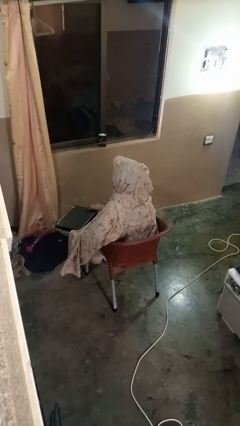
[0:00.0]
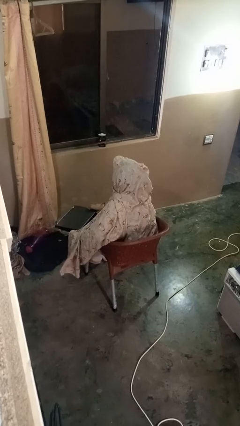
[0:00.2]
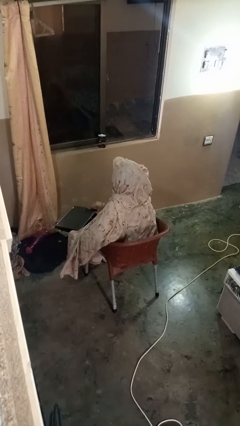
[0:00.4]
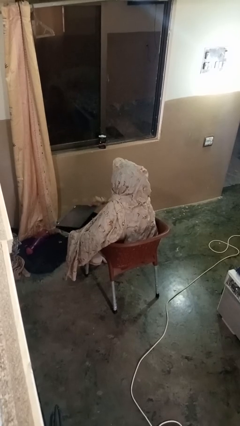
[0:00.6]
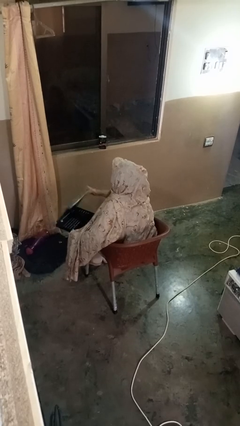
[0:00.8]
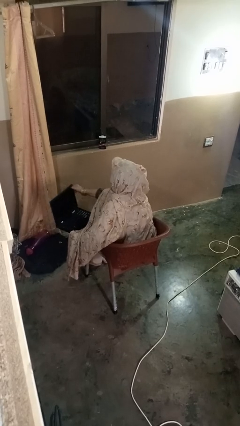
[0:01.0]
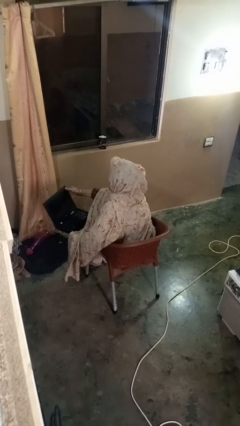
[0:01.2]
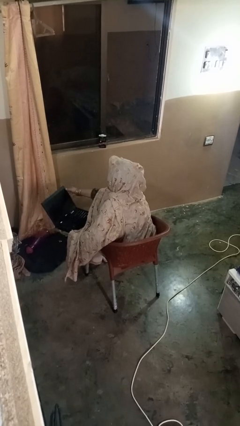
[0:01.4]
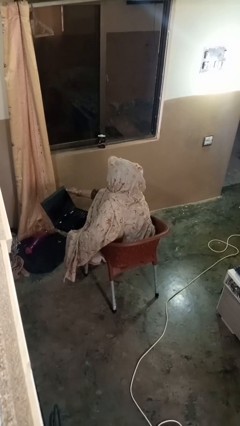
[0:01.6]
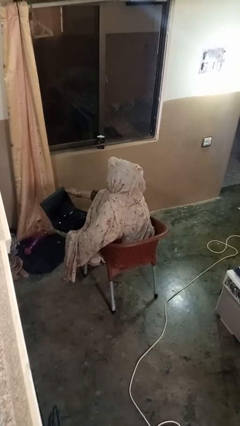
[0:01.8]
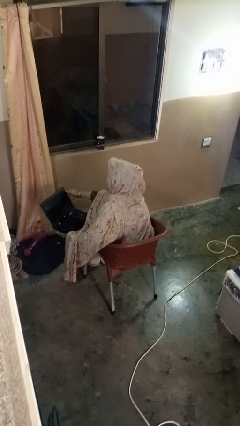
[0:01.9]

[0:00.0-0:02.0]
person opens laptop

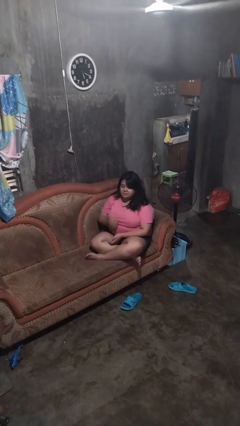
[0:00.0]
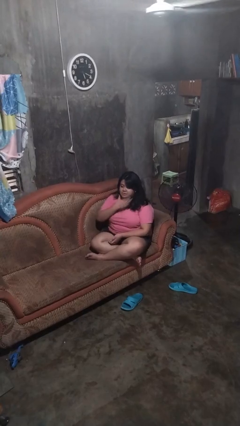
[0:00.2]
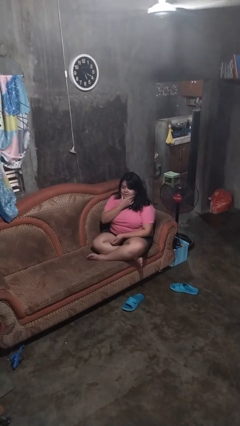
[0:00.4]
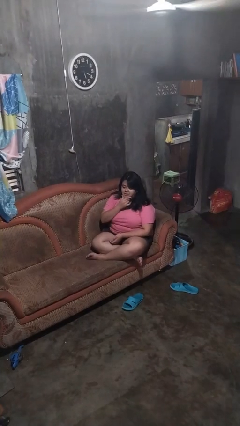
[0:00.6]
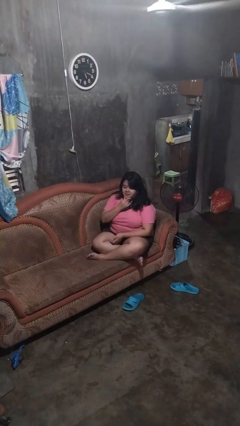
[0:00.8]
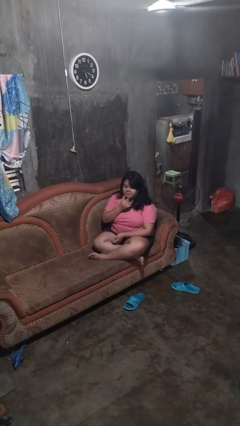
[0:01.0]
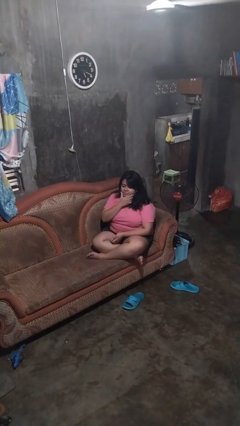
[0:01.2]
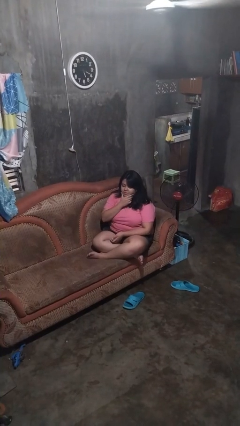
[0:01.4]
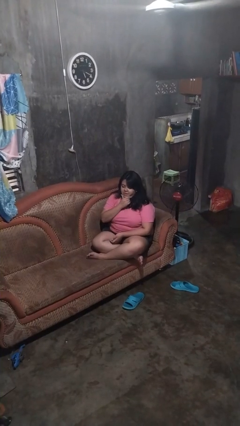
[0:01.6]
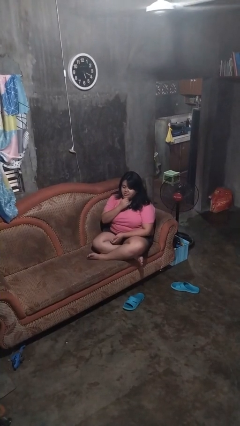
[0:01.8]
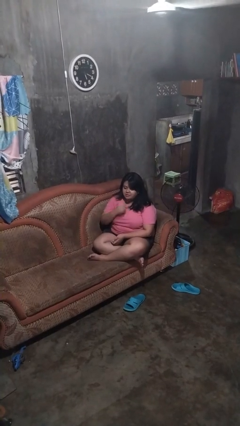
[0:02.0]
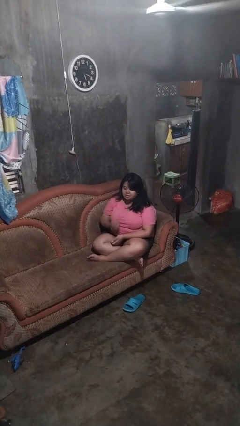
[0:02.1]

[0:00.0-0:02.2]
person strokes chin

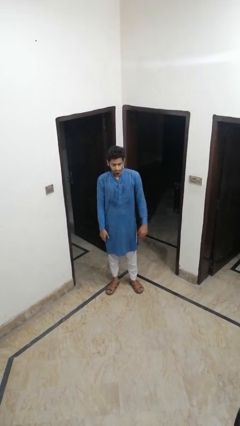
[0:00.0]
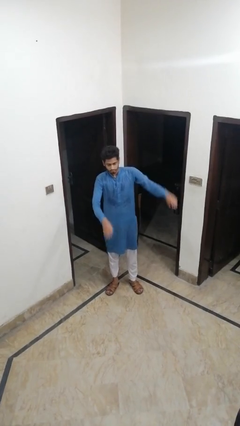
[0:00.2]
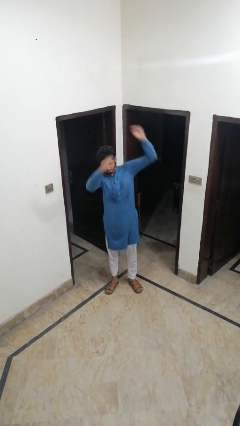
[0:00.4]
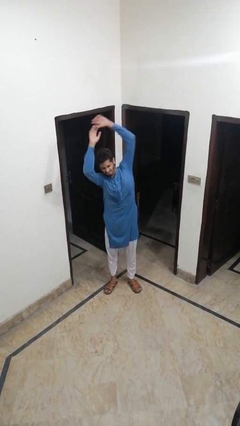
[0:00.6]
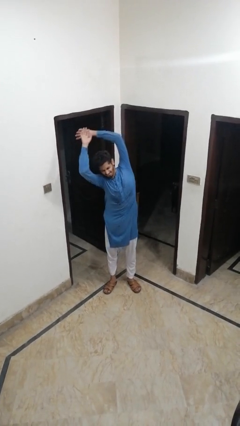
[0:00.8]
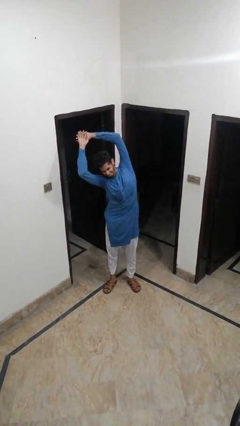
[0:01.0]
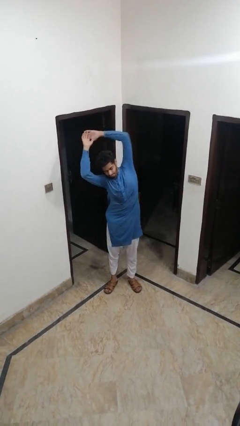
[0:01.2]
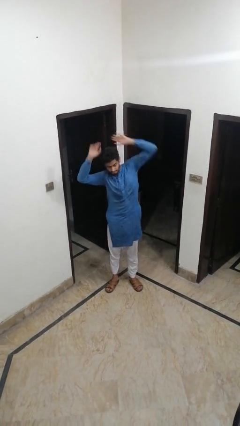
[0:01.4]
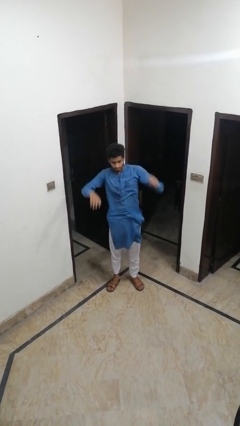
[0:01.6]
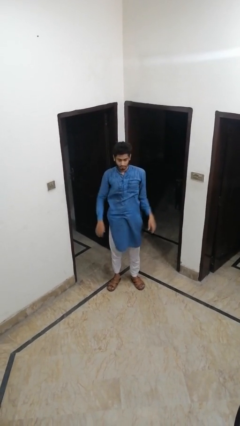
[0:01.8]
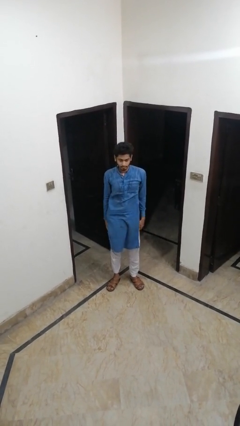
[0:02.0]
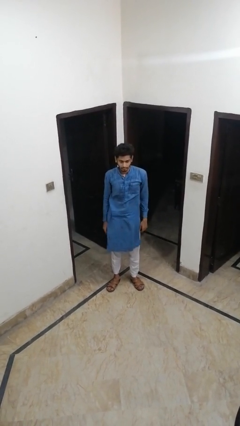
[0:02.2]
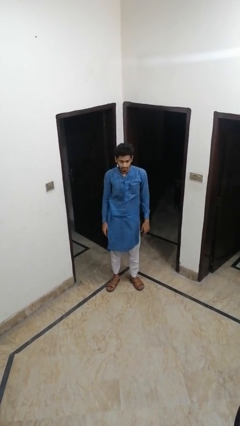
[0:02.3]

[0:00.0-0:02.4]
person stretches arms to side

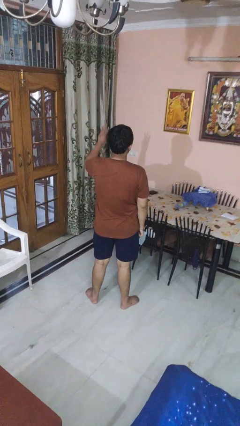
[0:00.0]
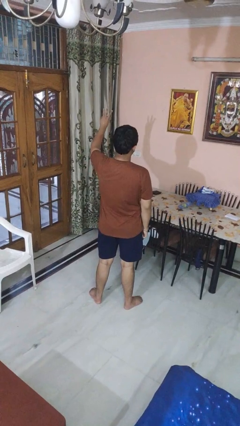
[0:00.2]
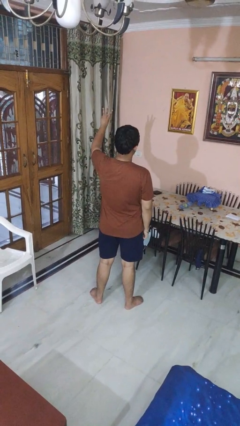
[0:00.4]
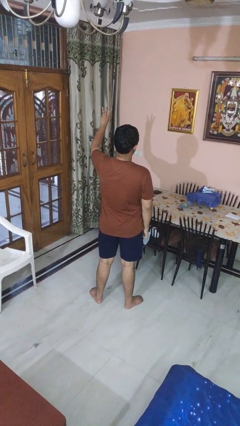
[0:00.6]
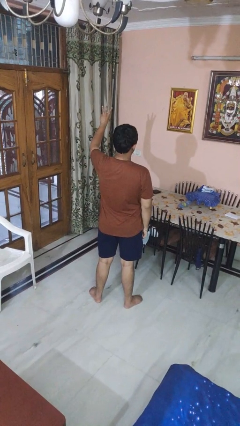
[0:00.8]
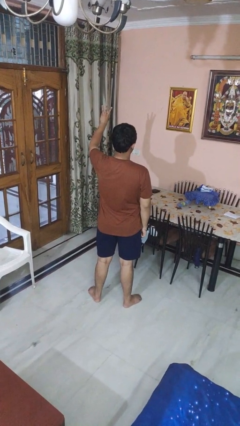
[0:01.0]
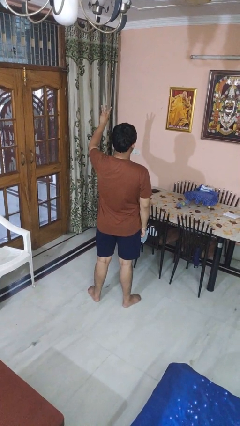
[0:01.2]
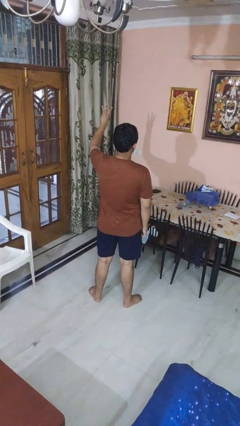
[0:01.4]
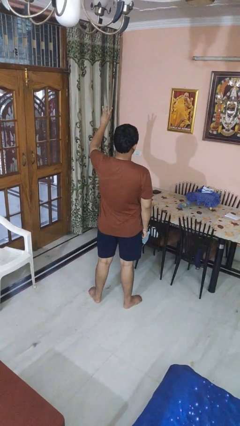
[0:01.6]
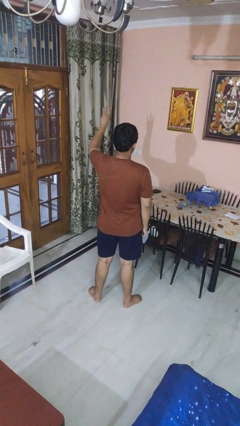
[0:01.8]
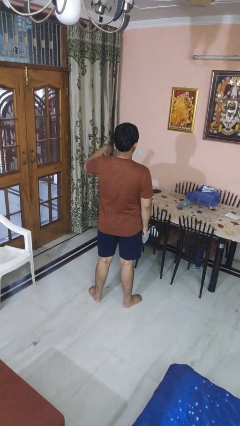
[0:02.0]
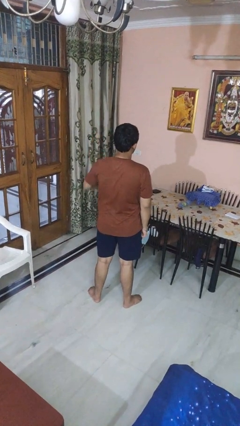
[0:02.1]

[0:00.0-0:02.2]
person gestures number three

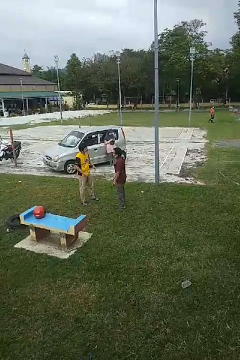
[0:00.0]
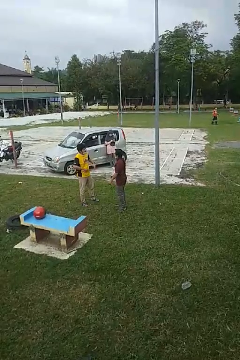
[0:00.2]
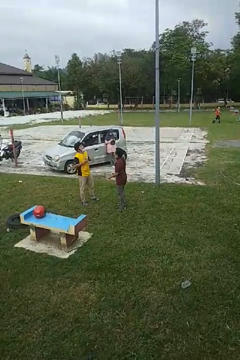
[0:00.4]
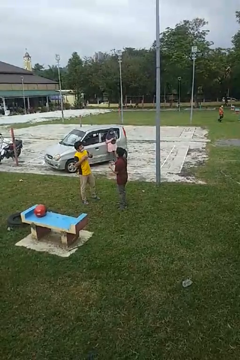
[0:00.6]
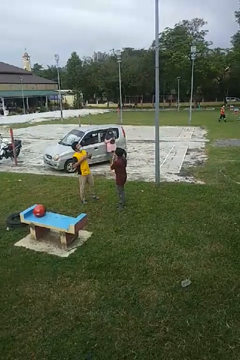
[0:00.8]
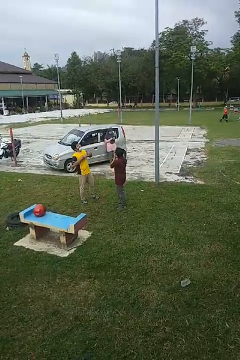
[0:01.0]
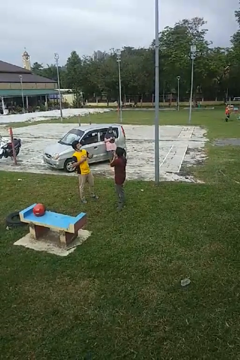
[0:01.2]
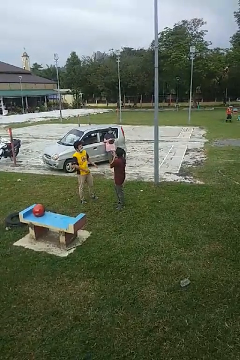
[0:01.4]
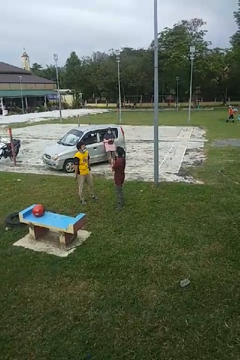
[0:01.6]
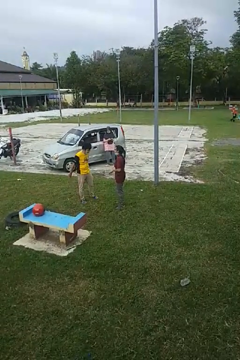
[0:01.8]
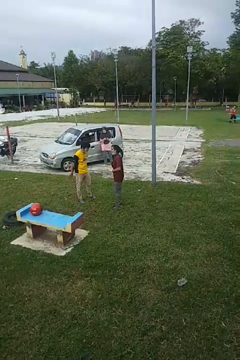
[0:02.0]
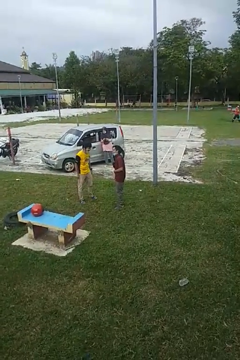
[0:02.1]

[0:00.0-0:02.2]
person laughs with person

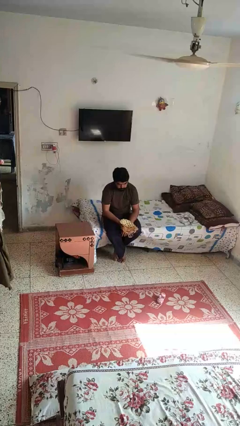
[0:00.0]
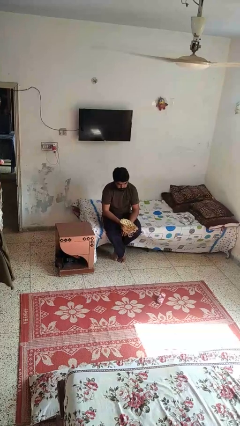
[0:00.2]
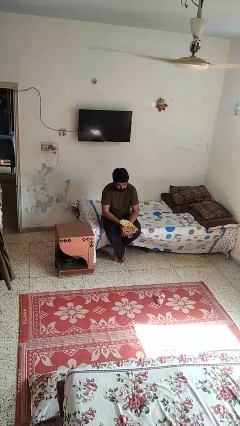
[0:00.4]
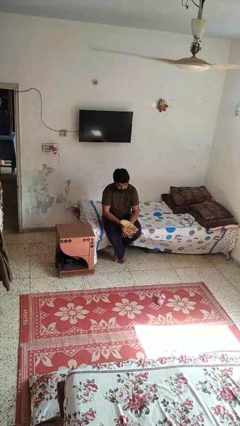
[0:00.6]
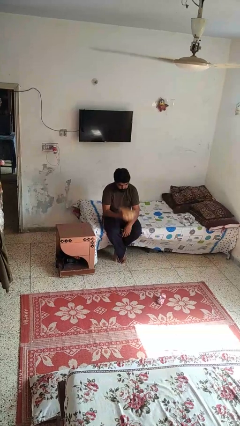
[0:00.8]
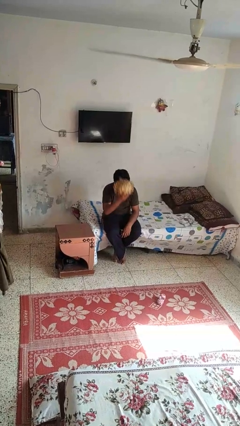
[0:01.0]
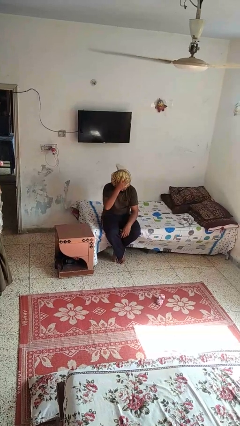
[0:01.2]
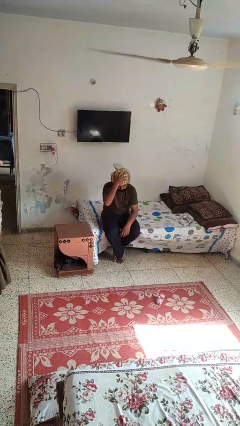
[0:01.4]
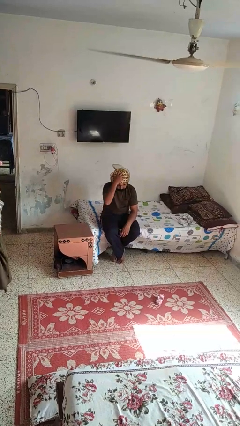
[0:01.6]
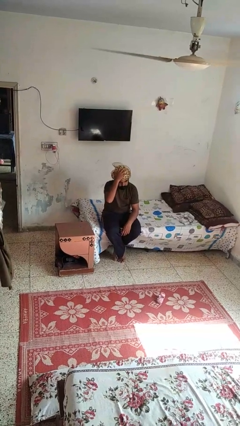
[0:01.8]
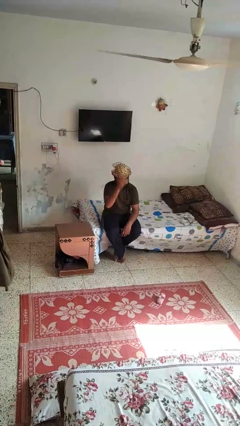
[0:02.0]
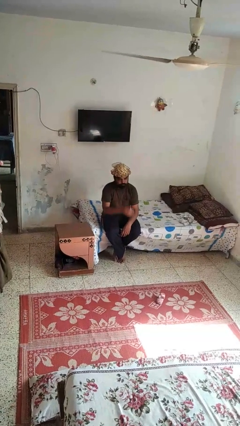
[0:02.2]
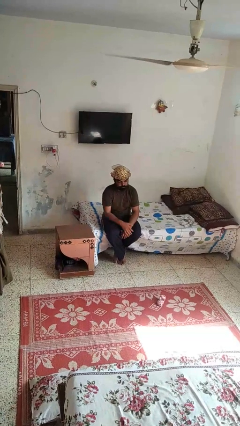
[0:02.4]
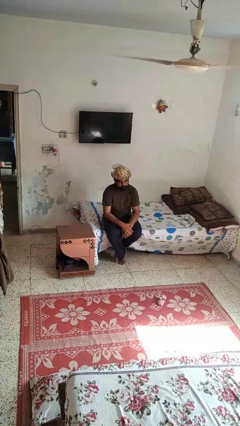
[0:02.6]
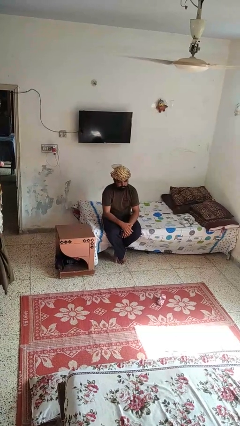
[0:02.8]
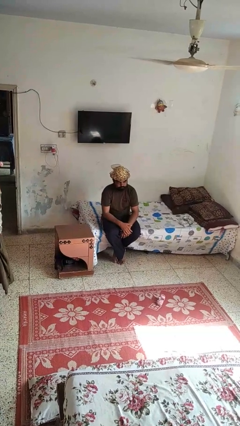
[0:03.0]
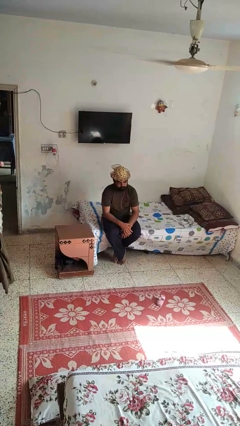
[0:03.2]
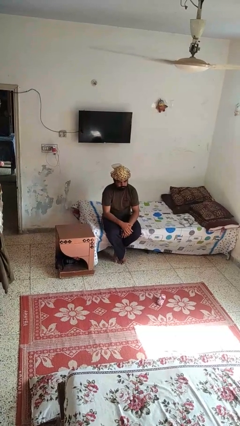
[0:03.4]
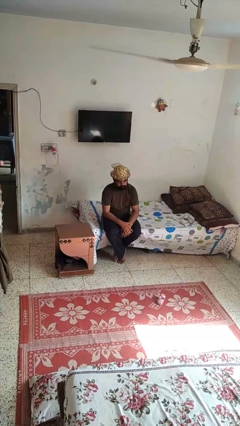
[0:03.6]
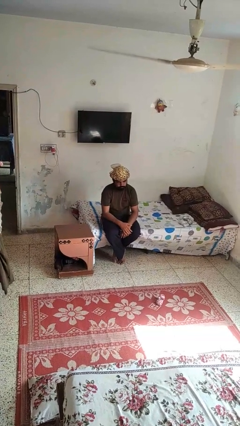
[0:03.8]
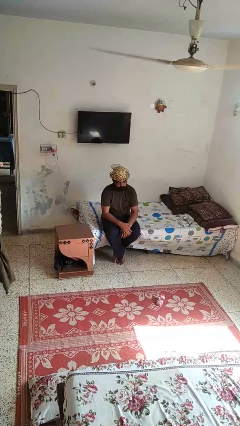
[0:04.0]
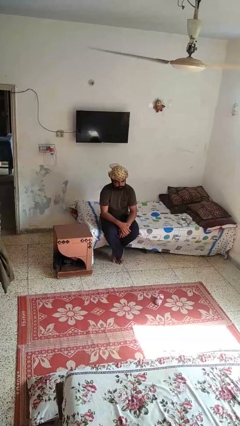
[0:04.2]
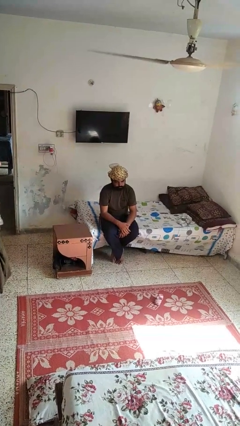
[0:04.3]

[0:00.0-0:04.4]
person puts on hat

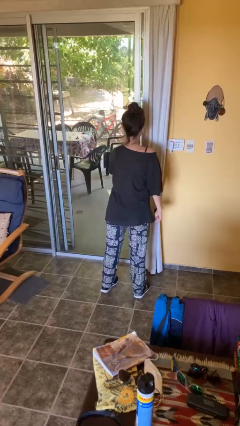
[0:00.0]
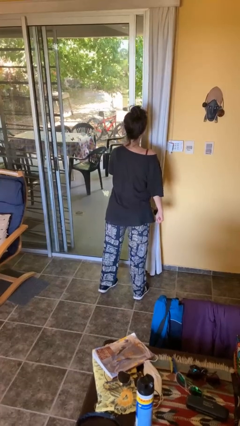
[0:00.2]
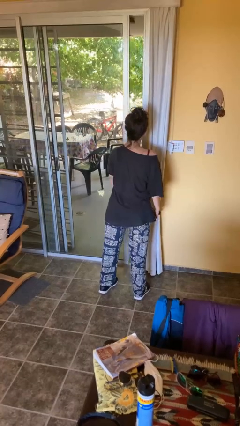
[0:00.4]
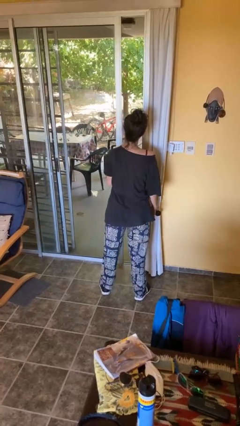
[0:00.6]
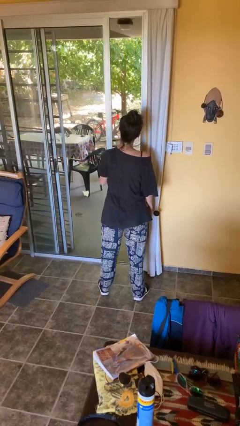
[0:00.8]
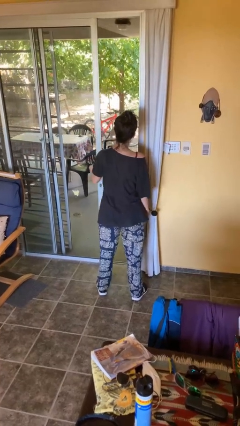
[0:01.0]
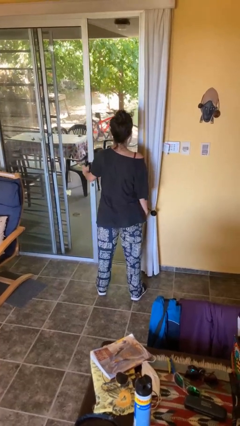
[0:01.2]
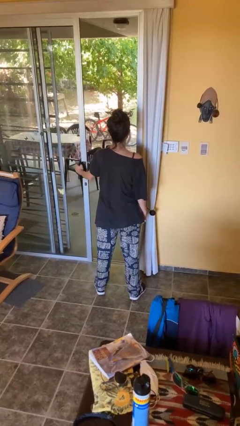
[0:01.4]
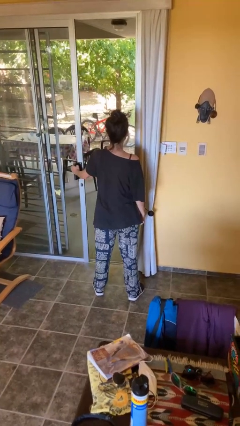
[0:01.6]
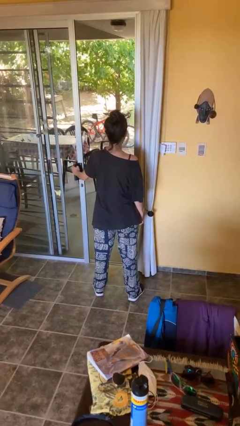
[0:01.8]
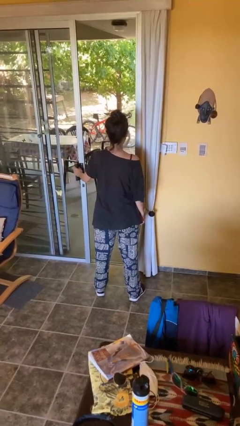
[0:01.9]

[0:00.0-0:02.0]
person opens facility door
